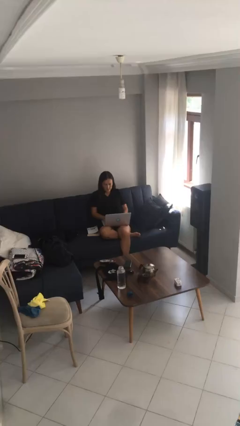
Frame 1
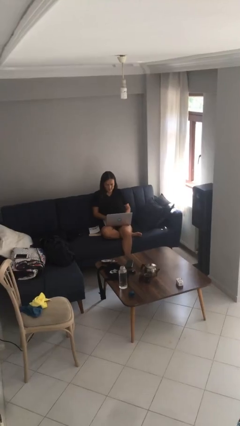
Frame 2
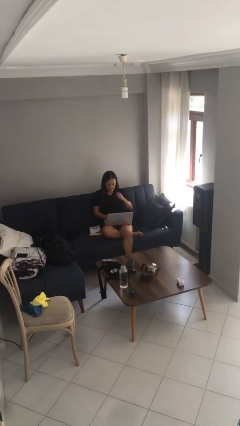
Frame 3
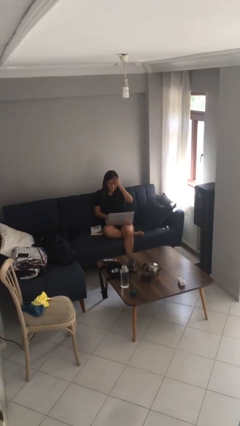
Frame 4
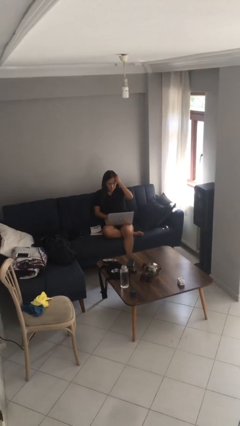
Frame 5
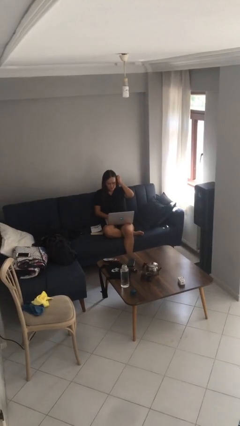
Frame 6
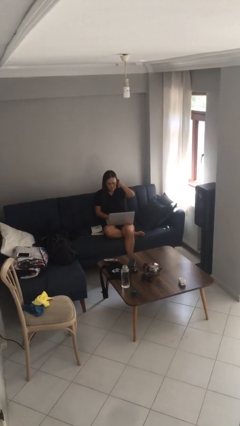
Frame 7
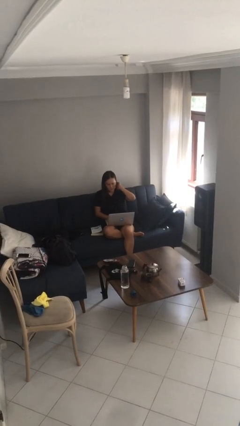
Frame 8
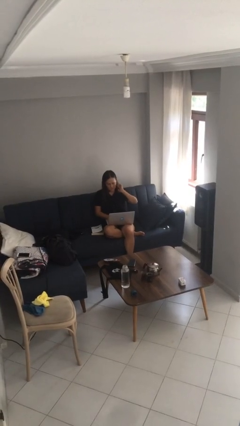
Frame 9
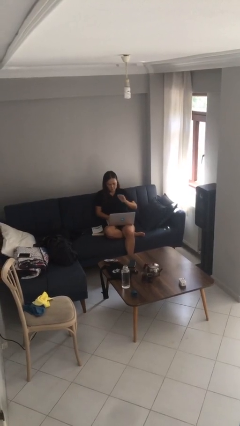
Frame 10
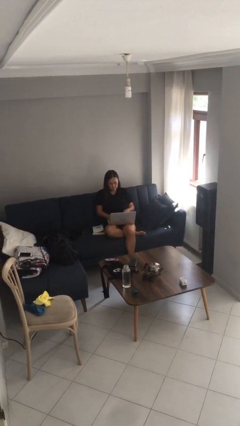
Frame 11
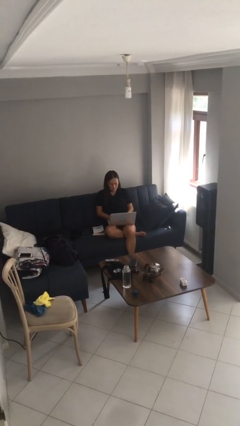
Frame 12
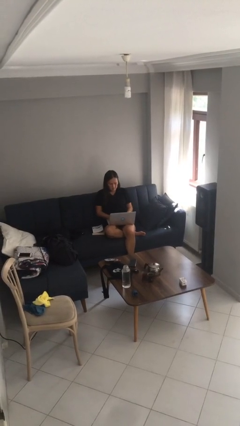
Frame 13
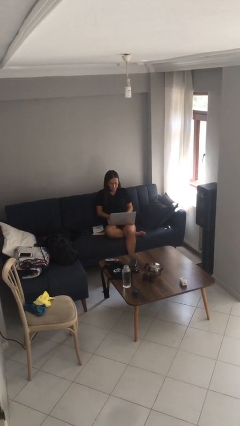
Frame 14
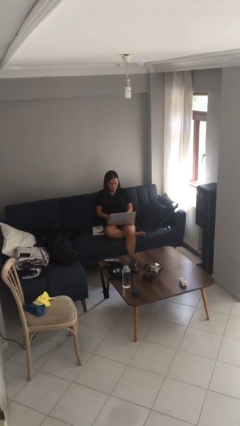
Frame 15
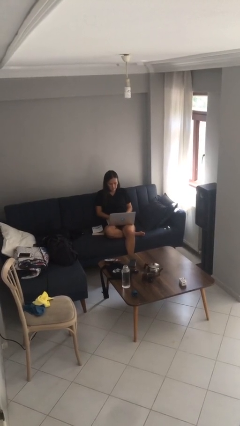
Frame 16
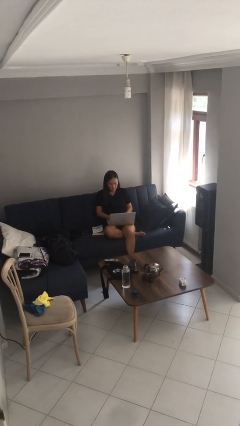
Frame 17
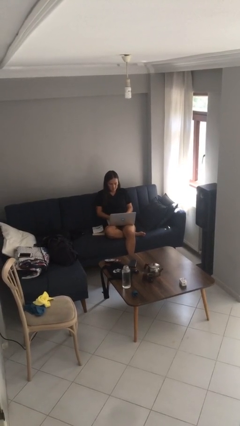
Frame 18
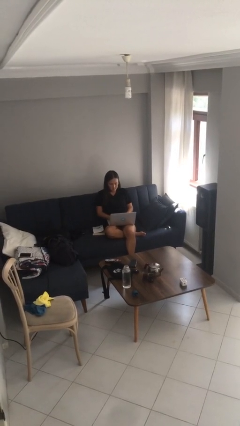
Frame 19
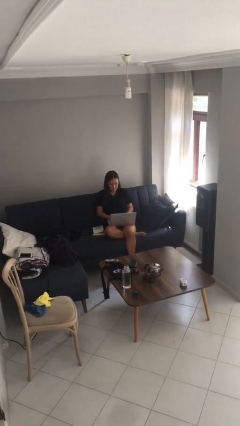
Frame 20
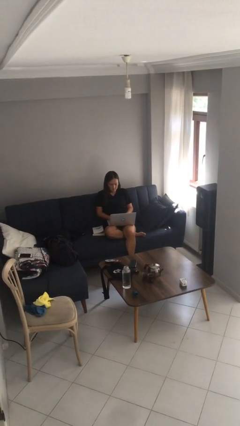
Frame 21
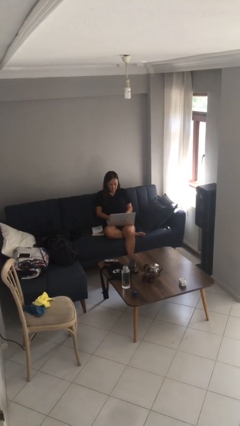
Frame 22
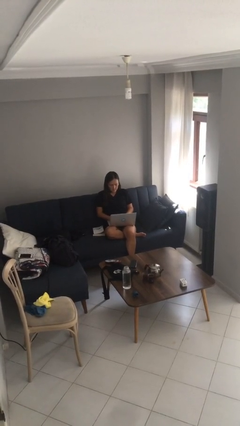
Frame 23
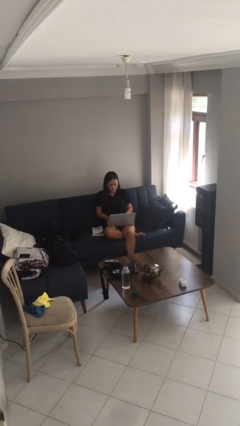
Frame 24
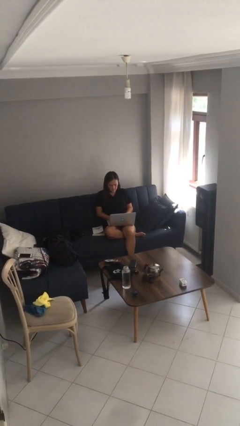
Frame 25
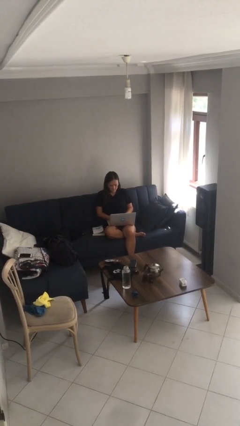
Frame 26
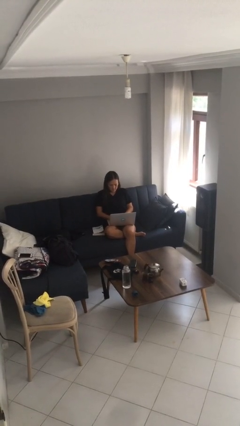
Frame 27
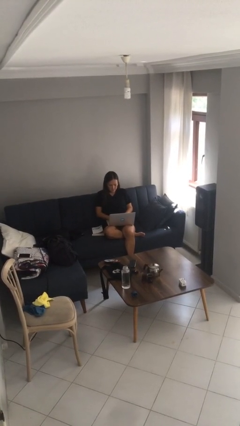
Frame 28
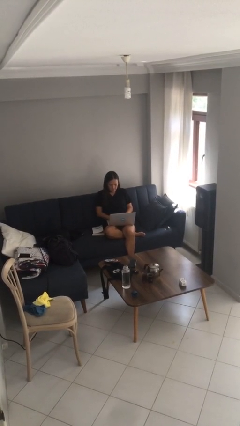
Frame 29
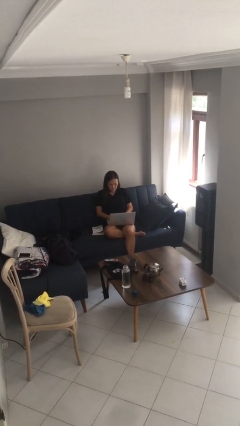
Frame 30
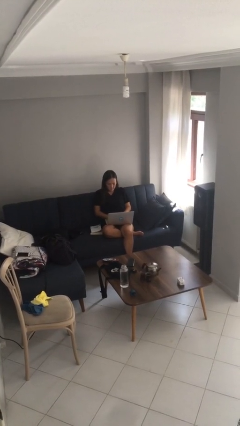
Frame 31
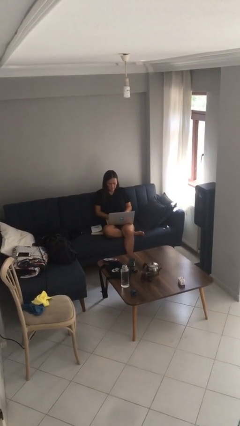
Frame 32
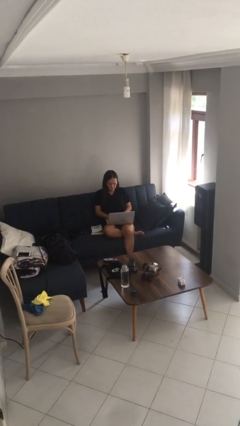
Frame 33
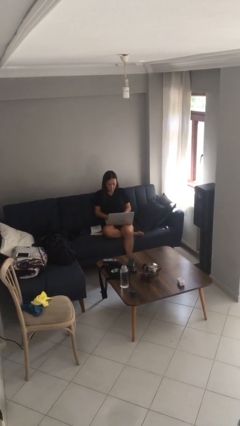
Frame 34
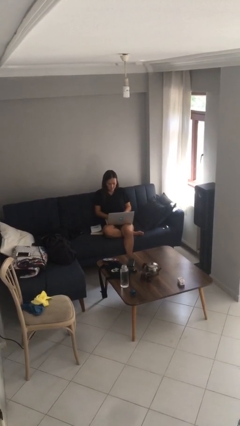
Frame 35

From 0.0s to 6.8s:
person interacts with laptop

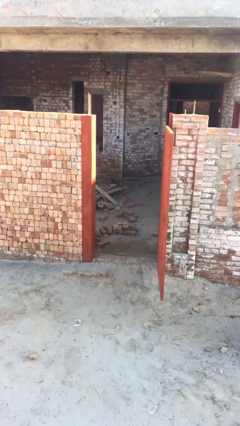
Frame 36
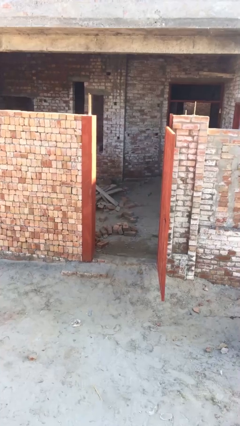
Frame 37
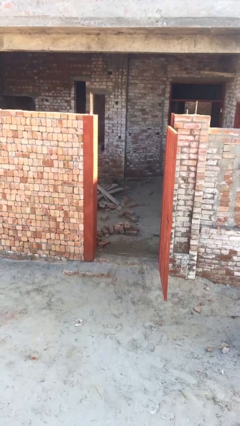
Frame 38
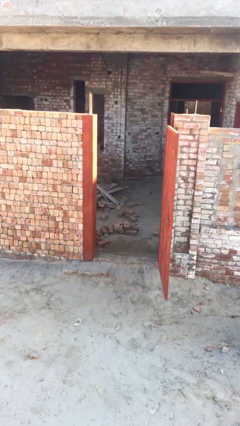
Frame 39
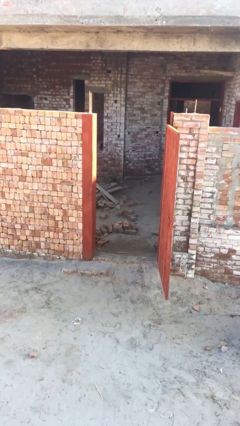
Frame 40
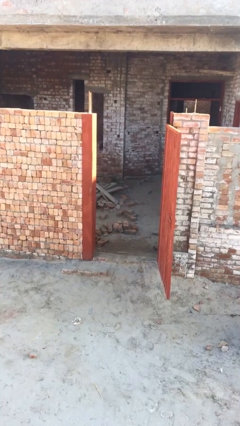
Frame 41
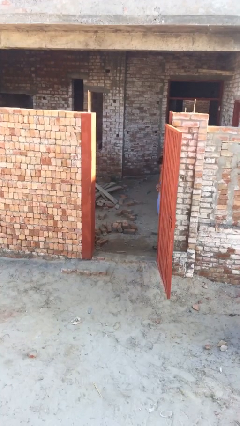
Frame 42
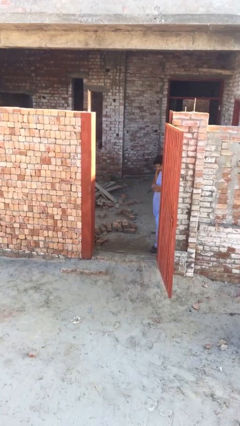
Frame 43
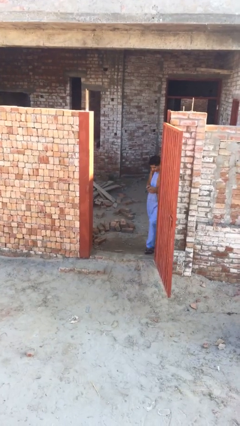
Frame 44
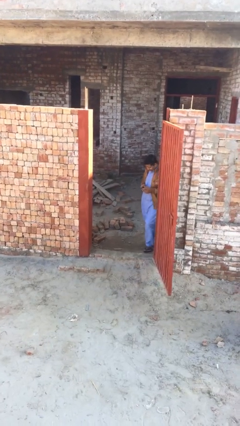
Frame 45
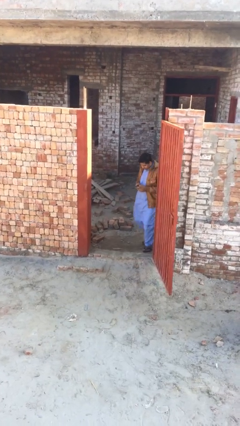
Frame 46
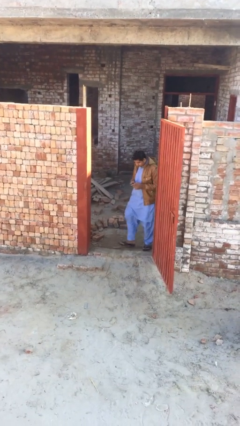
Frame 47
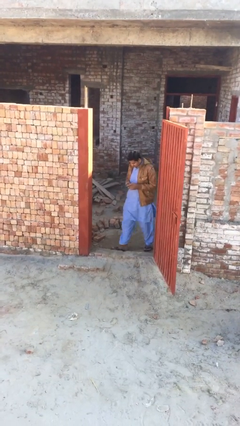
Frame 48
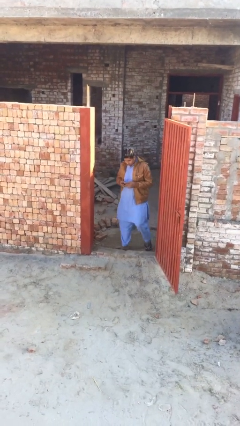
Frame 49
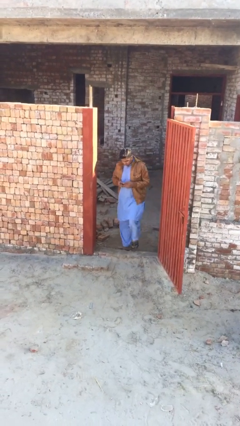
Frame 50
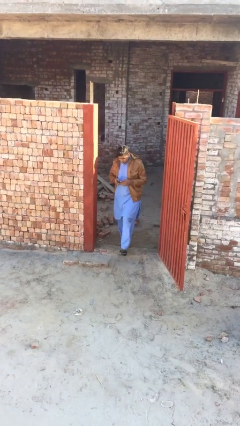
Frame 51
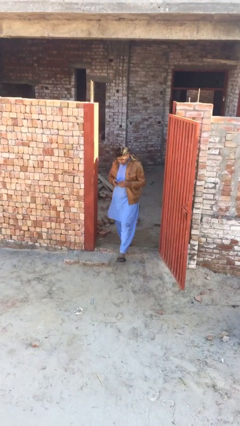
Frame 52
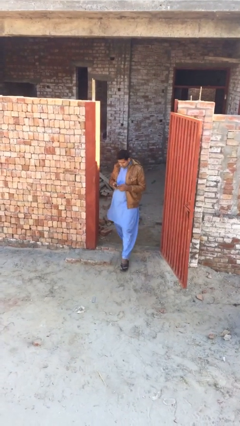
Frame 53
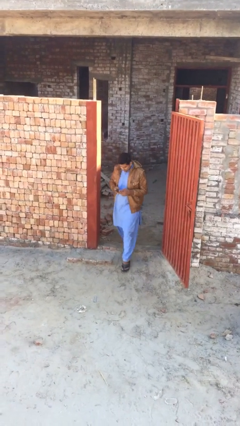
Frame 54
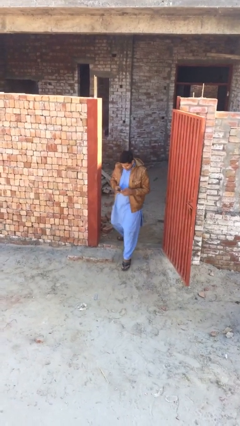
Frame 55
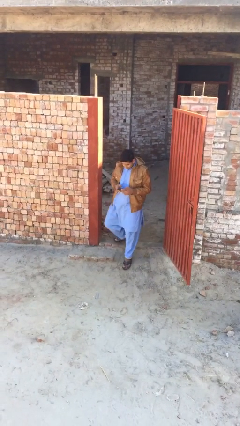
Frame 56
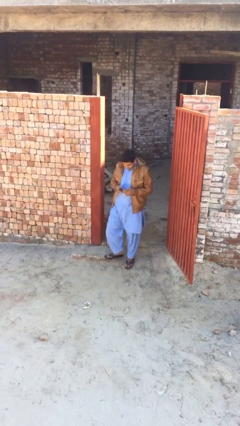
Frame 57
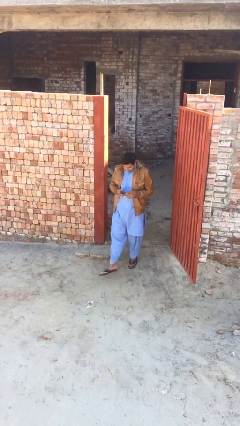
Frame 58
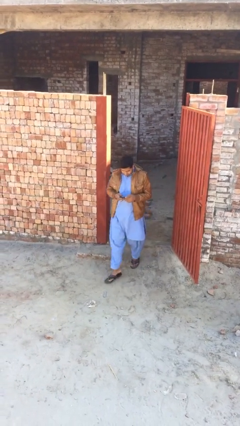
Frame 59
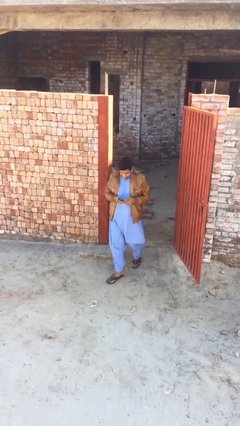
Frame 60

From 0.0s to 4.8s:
person enters scene through structure

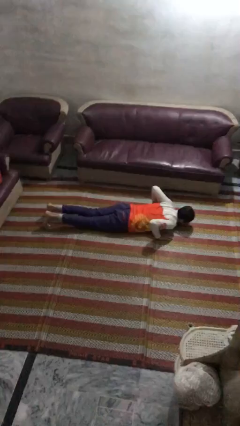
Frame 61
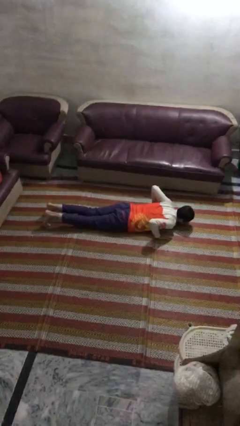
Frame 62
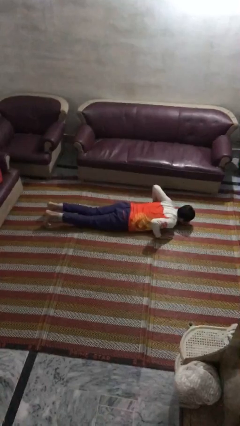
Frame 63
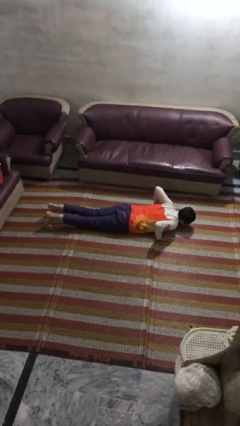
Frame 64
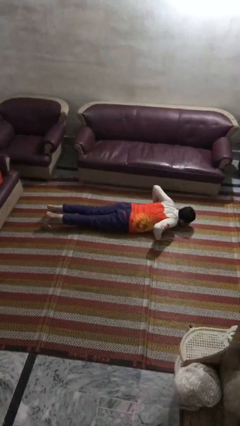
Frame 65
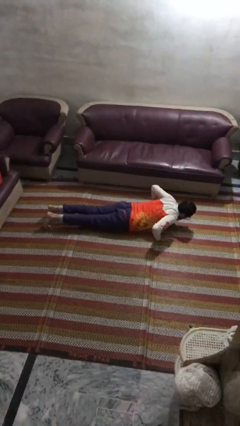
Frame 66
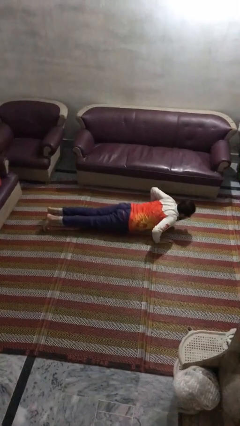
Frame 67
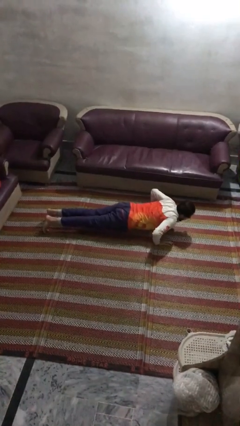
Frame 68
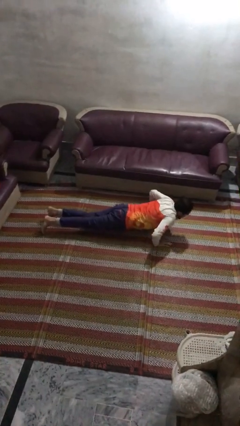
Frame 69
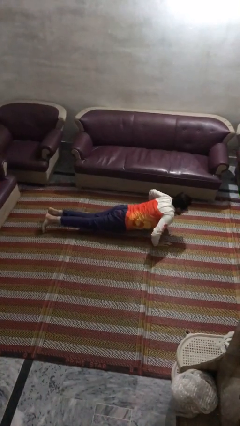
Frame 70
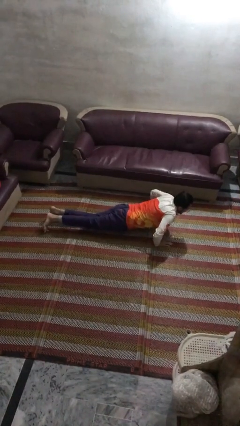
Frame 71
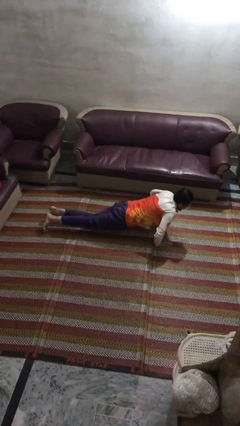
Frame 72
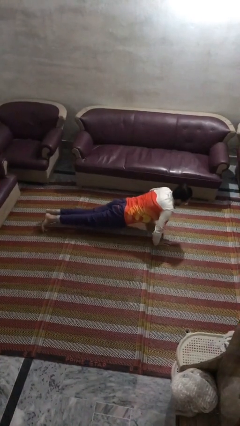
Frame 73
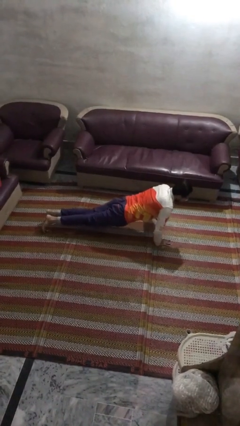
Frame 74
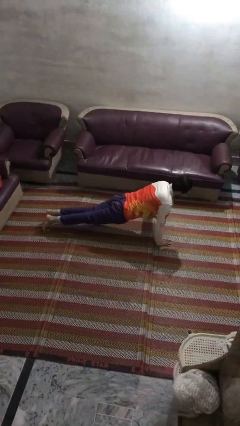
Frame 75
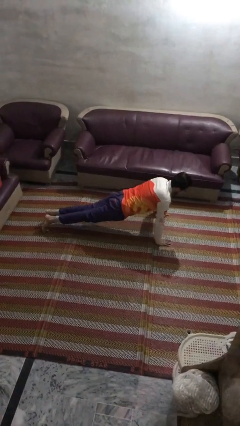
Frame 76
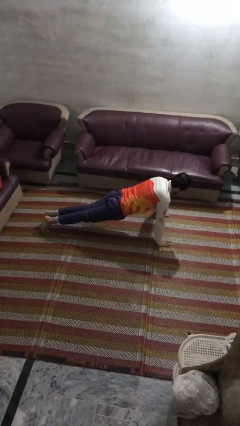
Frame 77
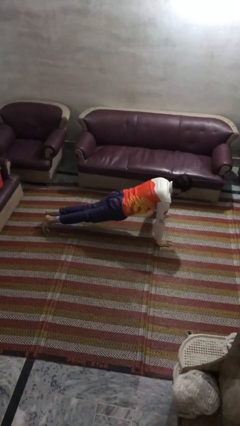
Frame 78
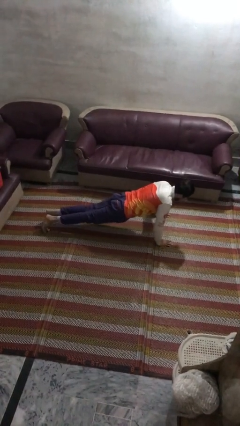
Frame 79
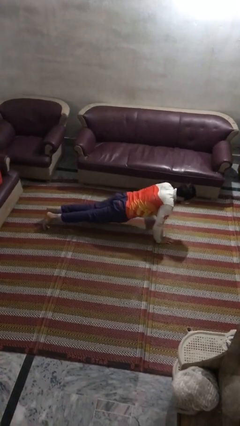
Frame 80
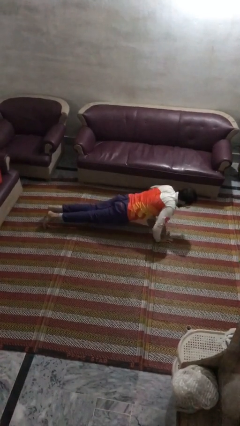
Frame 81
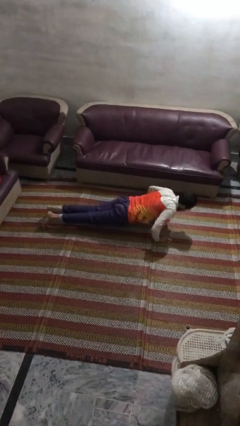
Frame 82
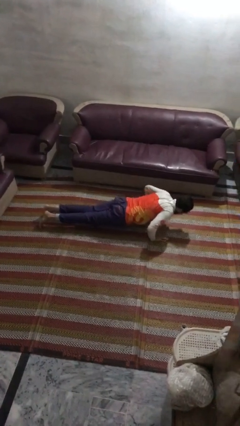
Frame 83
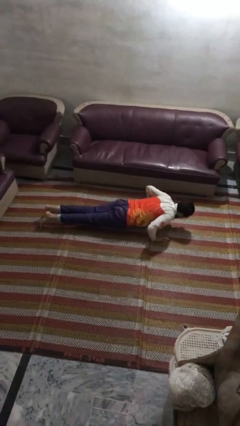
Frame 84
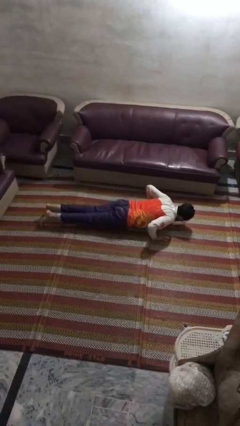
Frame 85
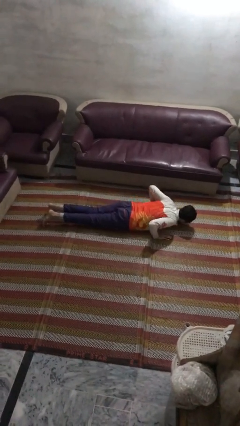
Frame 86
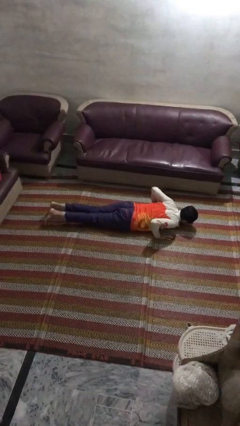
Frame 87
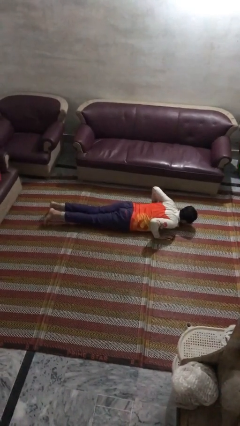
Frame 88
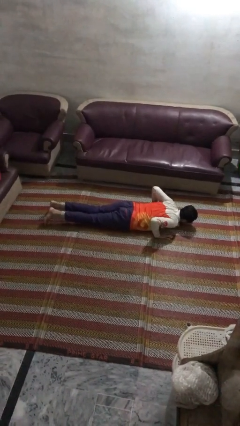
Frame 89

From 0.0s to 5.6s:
person exercises with pushup

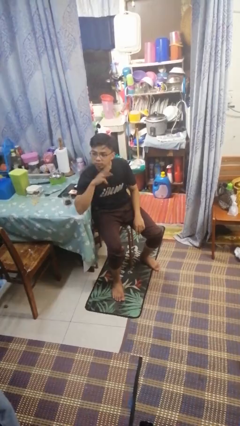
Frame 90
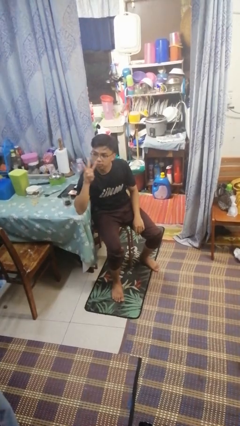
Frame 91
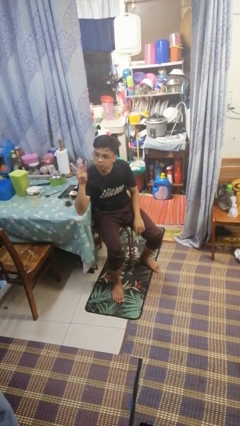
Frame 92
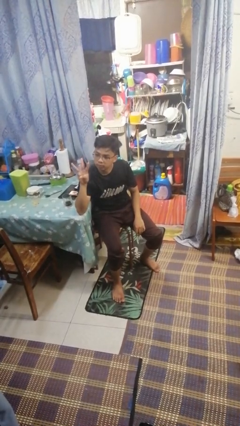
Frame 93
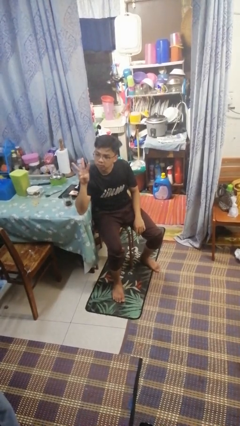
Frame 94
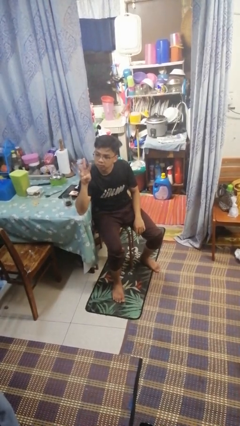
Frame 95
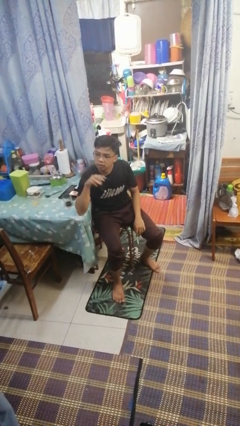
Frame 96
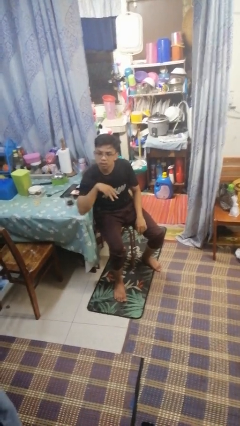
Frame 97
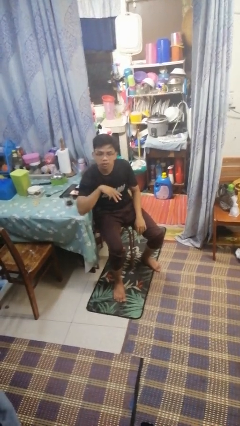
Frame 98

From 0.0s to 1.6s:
person gestures number three
